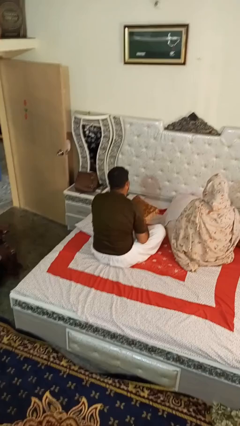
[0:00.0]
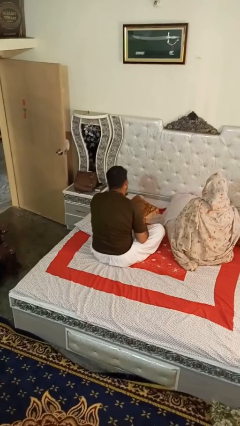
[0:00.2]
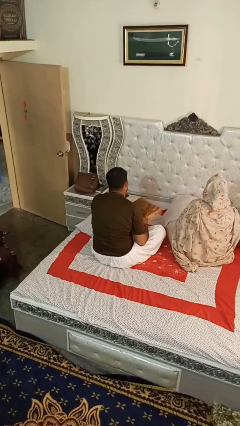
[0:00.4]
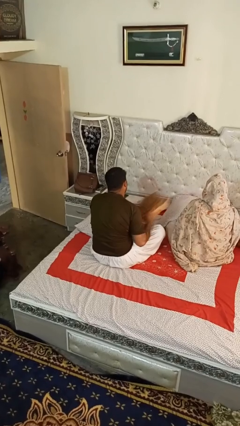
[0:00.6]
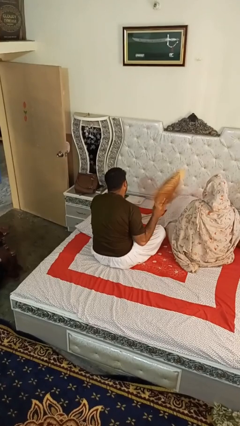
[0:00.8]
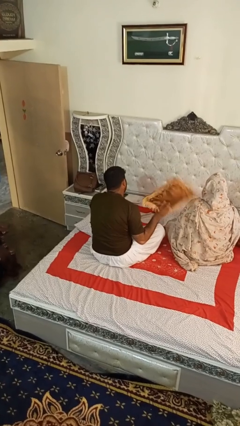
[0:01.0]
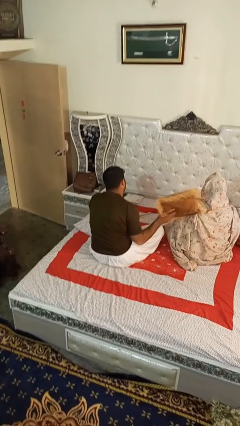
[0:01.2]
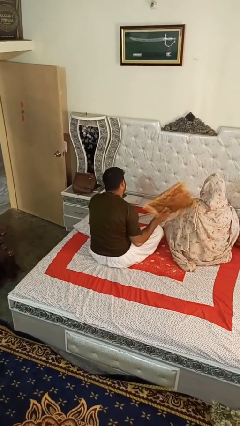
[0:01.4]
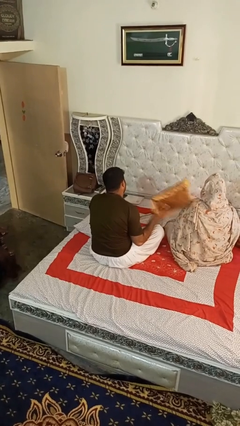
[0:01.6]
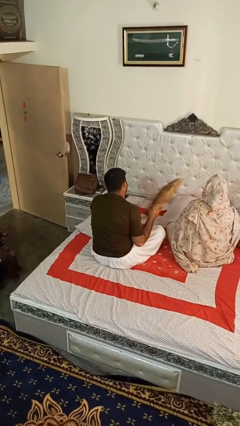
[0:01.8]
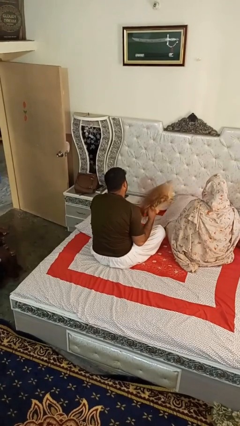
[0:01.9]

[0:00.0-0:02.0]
person hits person with pillow

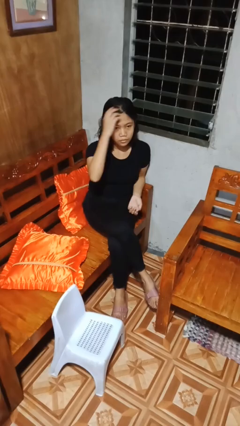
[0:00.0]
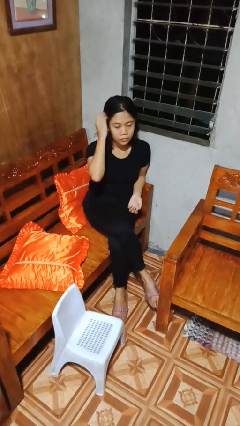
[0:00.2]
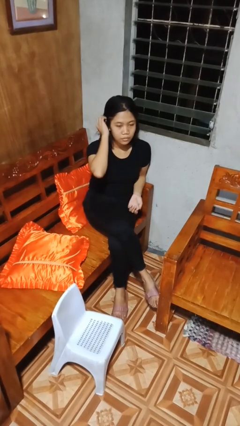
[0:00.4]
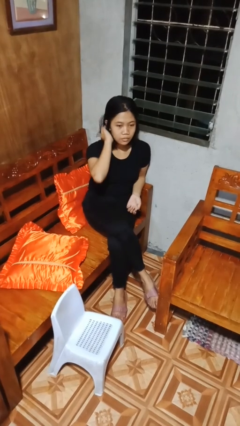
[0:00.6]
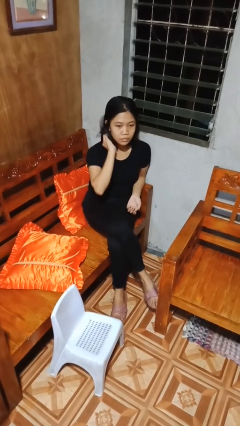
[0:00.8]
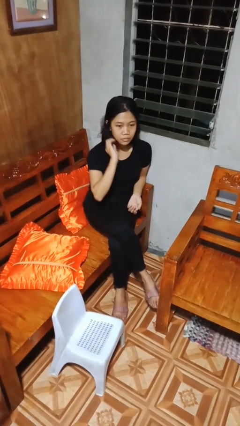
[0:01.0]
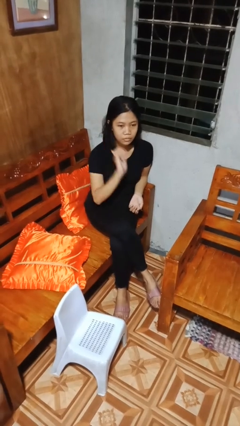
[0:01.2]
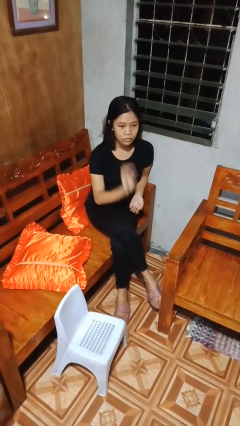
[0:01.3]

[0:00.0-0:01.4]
person strokes hair

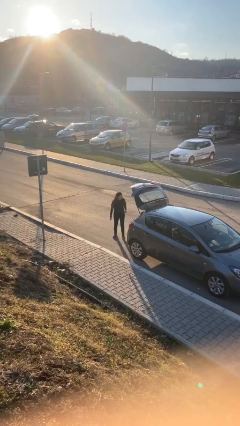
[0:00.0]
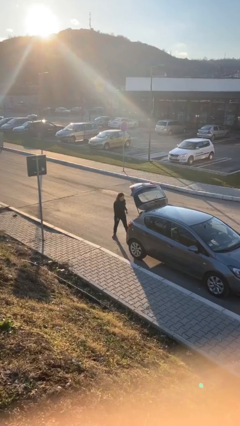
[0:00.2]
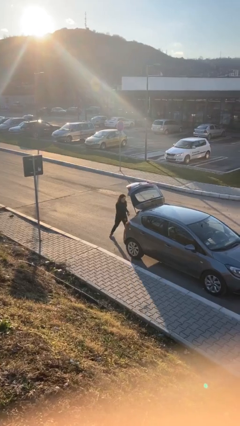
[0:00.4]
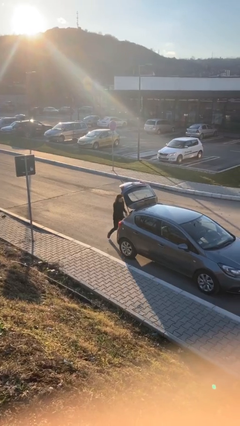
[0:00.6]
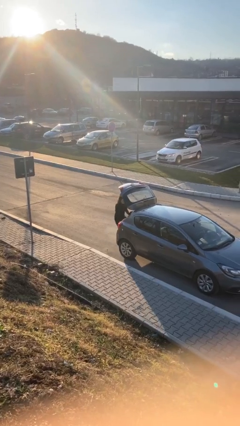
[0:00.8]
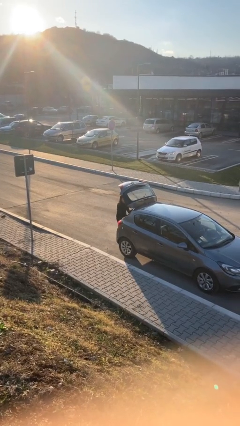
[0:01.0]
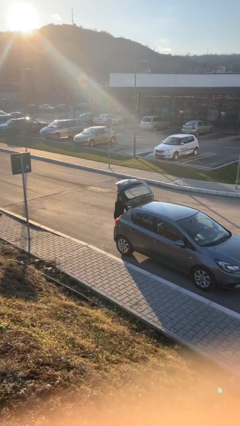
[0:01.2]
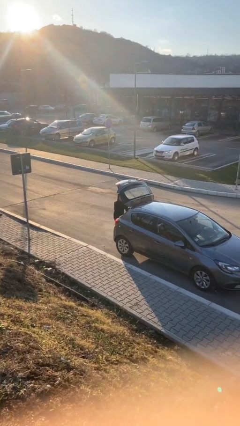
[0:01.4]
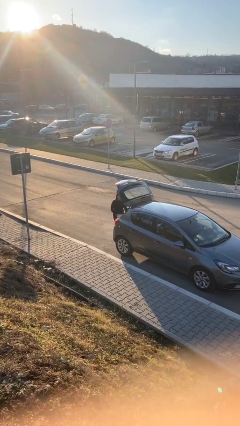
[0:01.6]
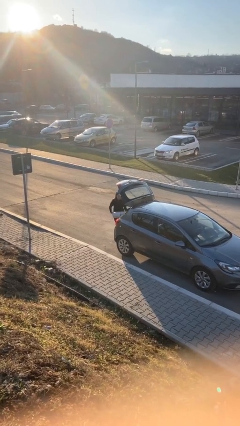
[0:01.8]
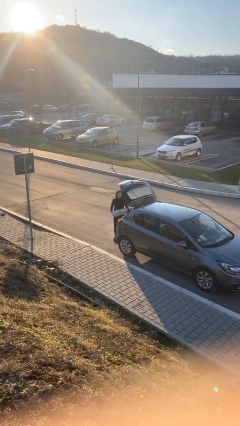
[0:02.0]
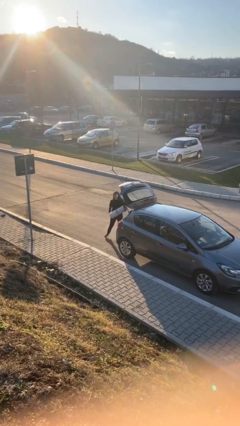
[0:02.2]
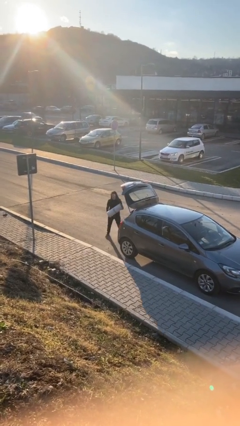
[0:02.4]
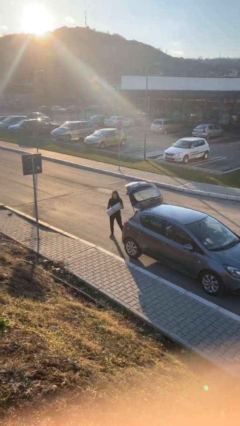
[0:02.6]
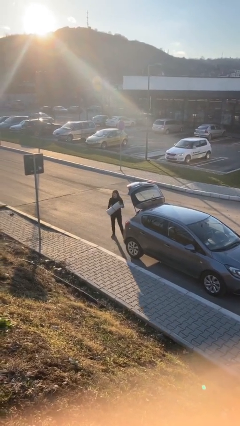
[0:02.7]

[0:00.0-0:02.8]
person unloads car

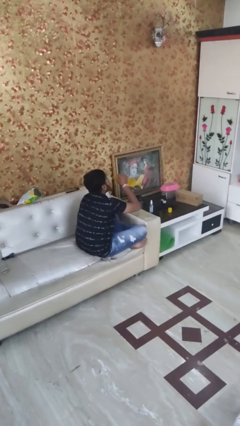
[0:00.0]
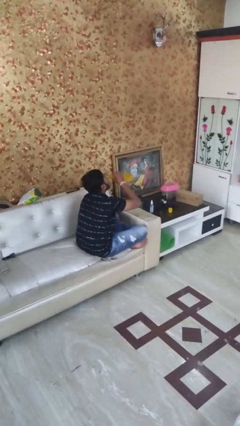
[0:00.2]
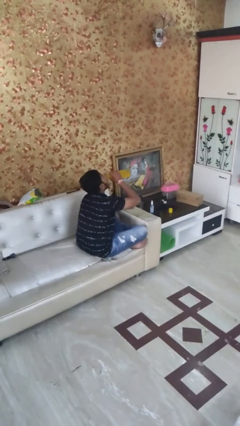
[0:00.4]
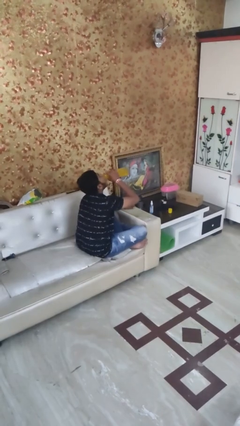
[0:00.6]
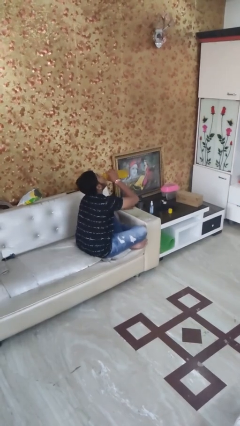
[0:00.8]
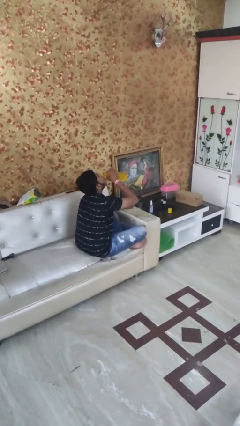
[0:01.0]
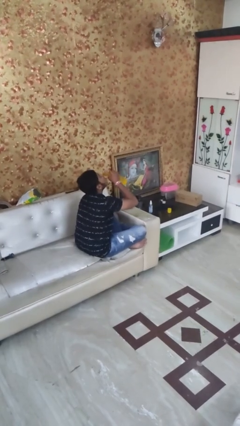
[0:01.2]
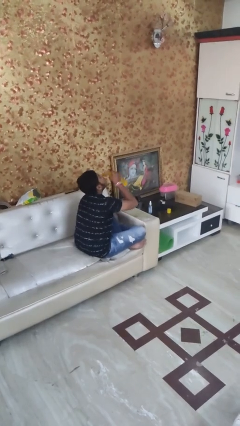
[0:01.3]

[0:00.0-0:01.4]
person drinks from bottle

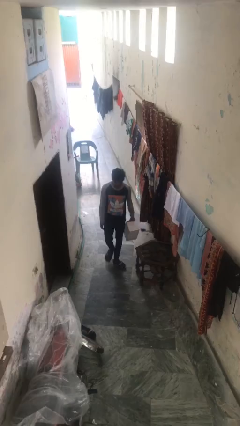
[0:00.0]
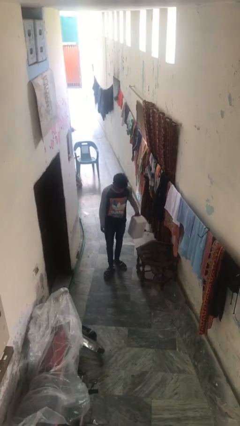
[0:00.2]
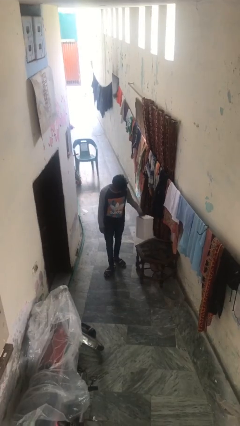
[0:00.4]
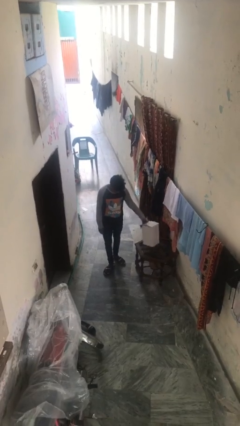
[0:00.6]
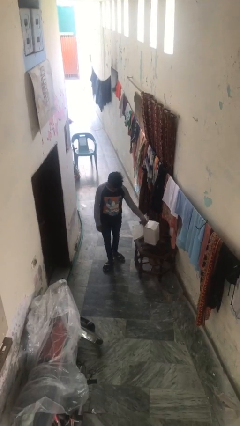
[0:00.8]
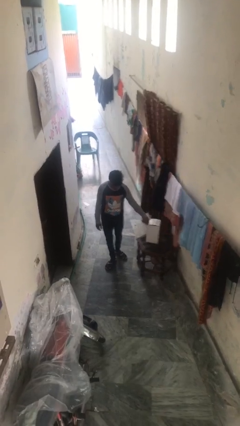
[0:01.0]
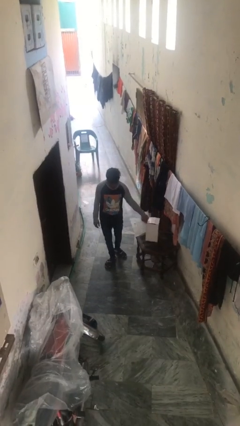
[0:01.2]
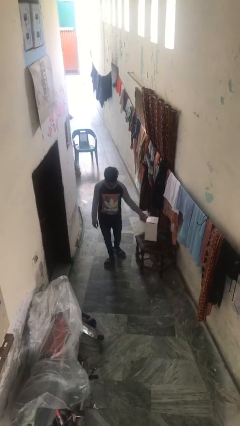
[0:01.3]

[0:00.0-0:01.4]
person puts down object on table

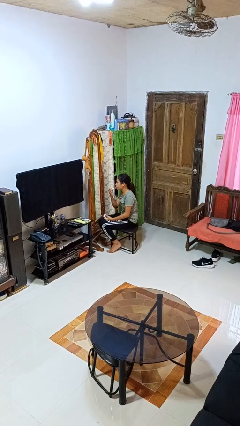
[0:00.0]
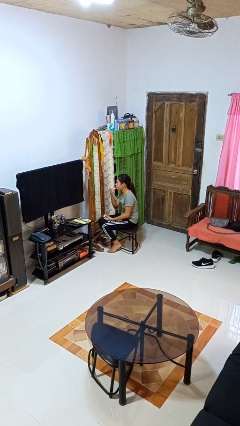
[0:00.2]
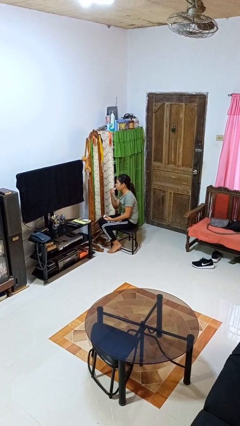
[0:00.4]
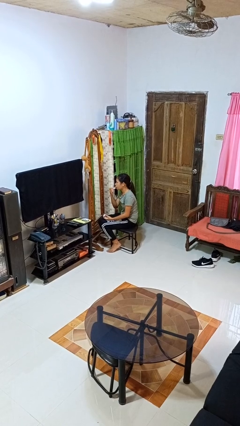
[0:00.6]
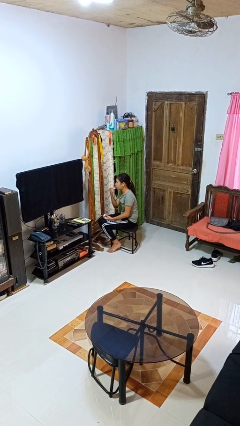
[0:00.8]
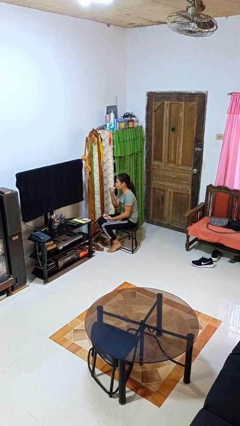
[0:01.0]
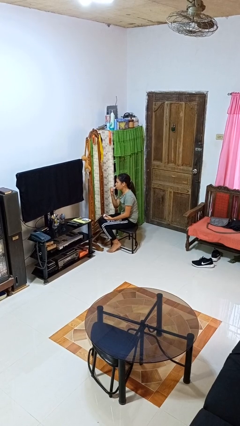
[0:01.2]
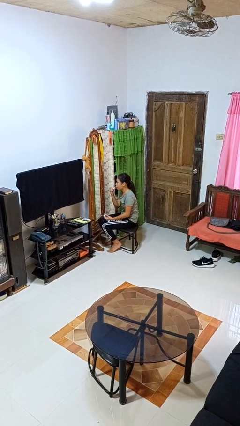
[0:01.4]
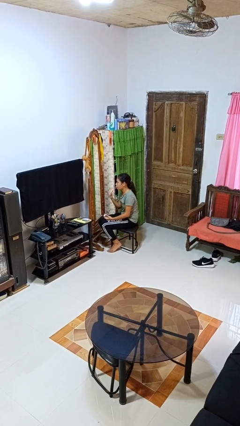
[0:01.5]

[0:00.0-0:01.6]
person applies lip makeup

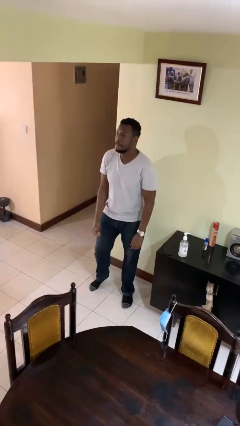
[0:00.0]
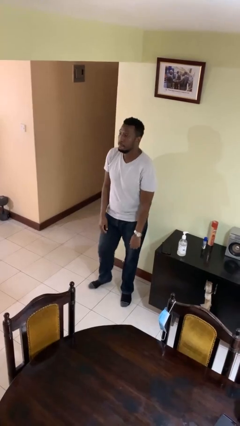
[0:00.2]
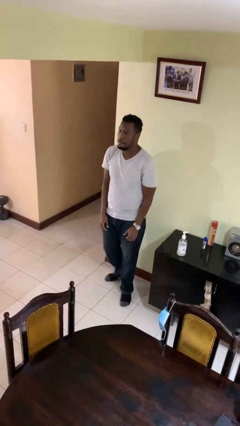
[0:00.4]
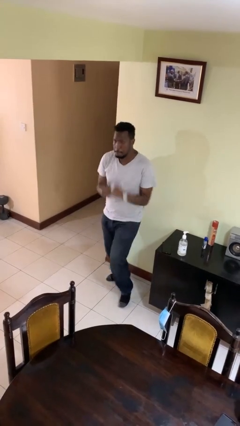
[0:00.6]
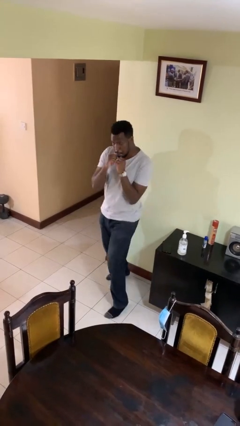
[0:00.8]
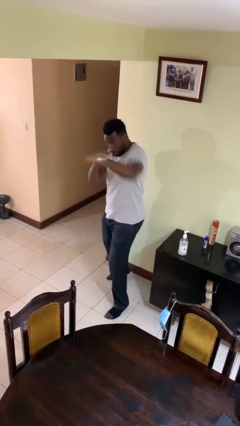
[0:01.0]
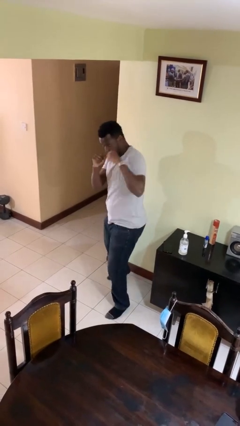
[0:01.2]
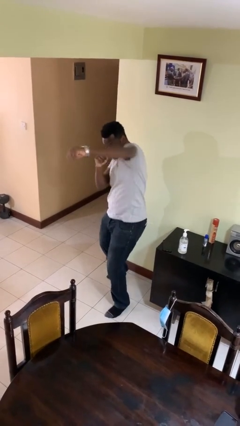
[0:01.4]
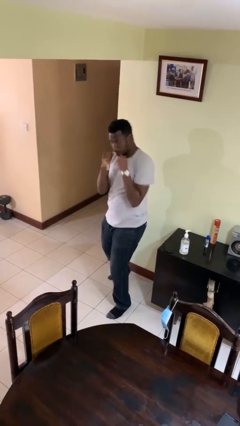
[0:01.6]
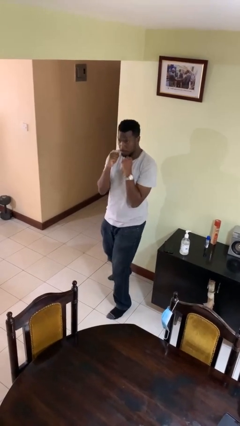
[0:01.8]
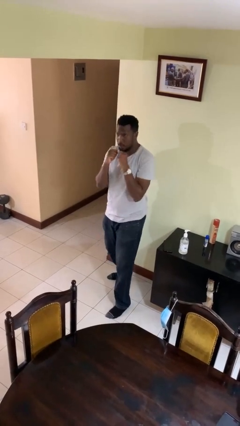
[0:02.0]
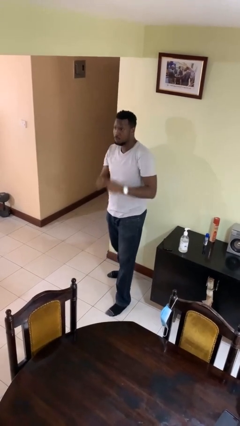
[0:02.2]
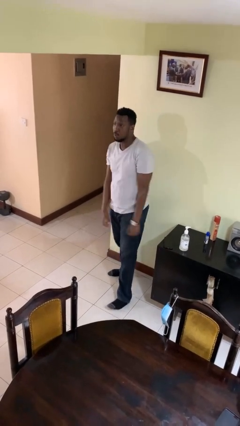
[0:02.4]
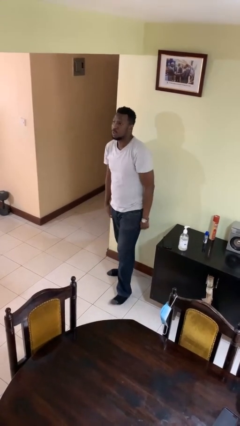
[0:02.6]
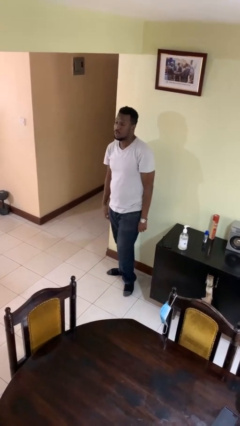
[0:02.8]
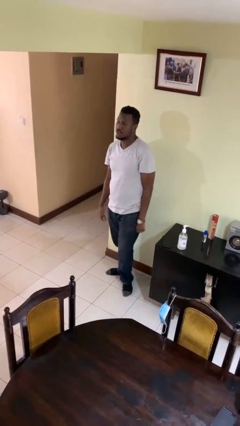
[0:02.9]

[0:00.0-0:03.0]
person punches

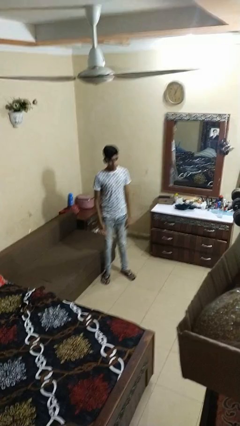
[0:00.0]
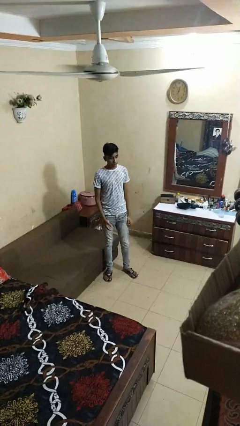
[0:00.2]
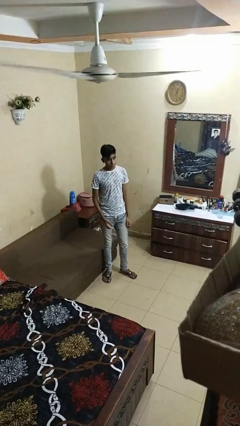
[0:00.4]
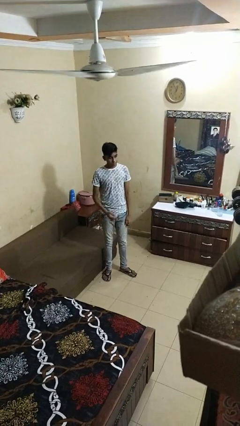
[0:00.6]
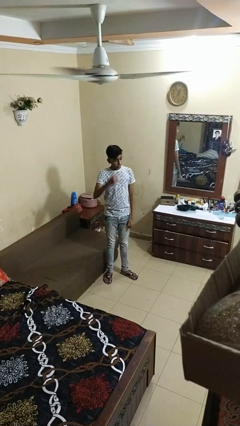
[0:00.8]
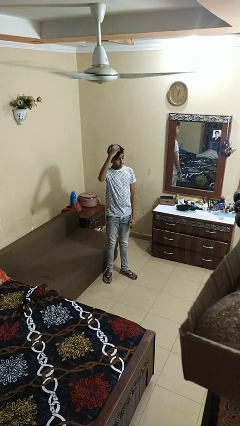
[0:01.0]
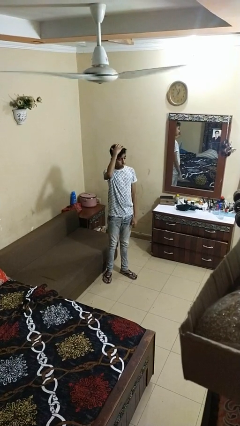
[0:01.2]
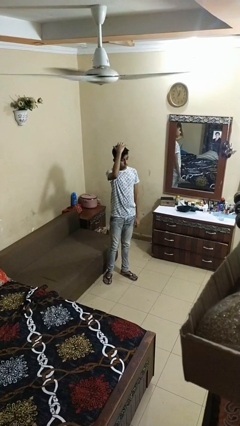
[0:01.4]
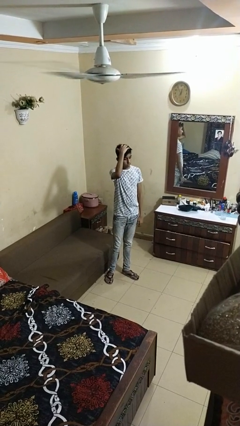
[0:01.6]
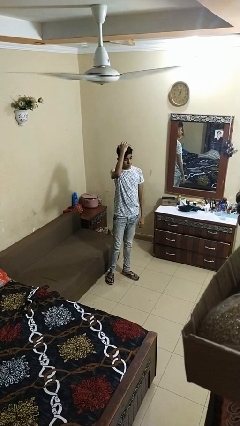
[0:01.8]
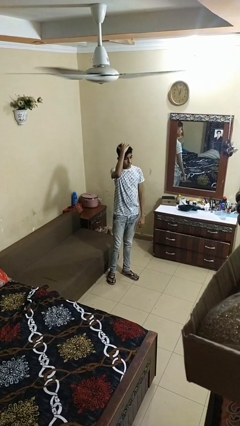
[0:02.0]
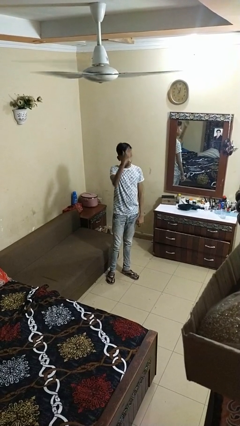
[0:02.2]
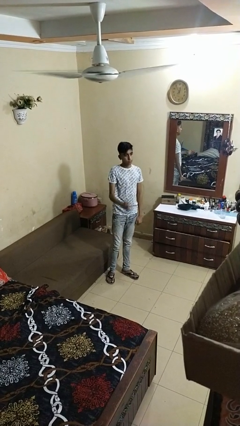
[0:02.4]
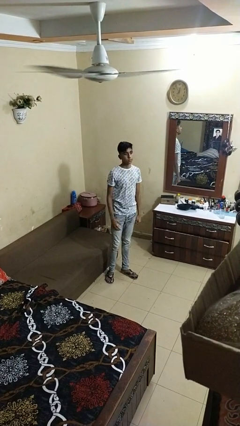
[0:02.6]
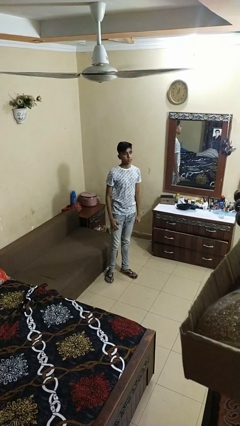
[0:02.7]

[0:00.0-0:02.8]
person pats head

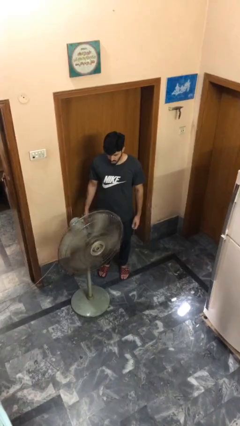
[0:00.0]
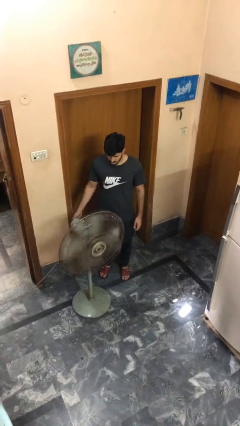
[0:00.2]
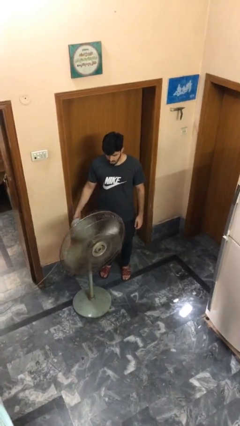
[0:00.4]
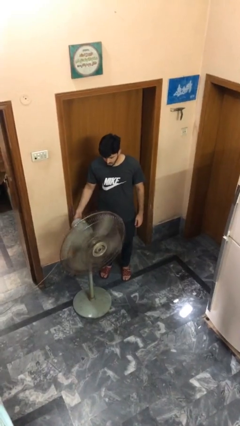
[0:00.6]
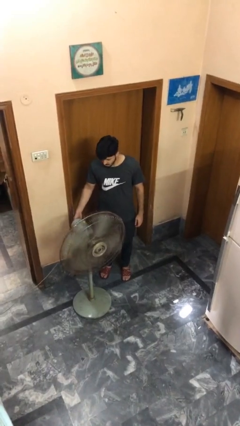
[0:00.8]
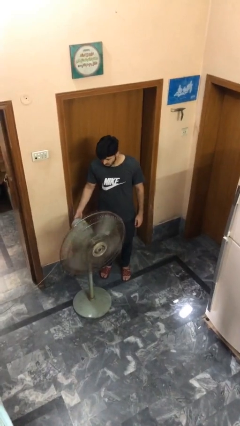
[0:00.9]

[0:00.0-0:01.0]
person turns on fan
